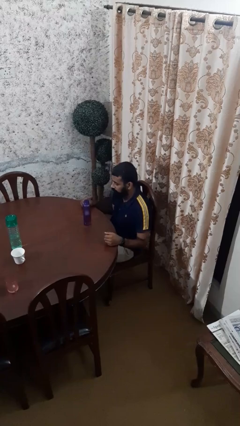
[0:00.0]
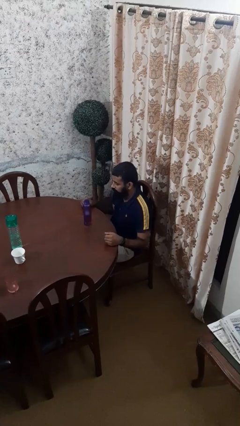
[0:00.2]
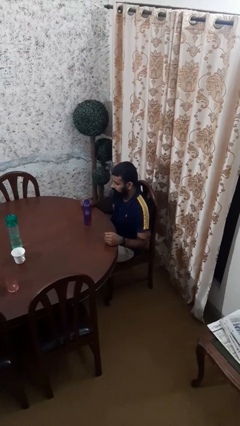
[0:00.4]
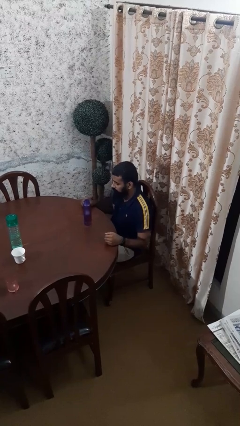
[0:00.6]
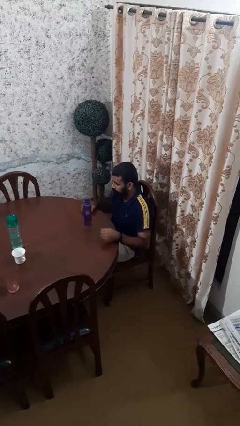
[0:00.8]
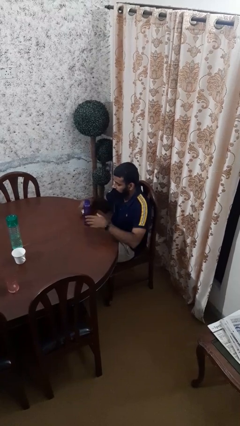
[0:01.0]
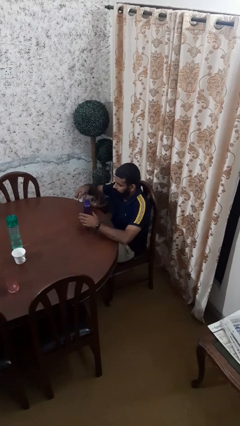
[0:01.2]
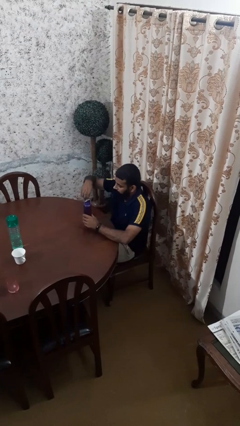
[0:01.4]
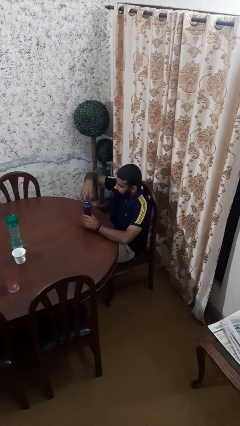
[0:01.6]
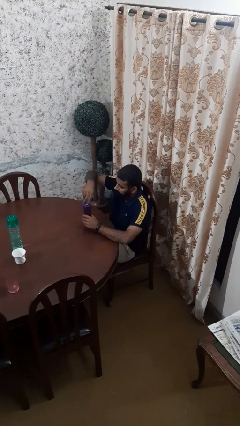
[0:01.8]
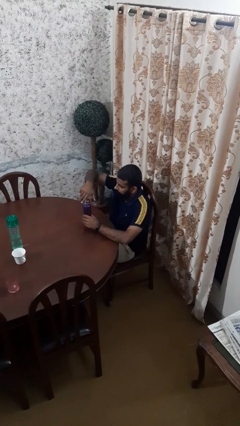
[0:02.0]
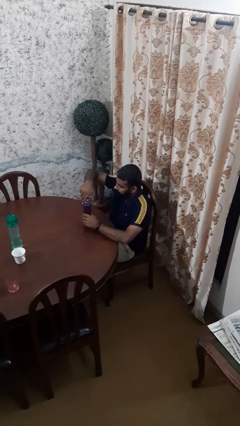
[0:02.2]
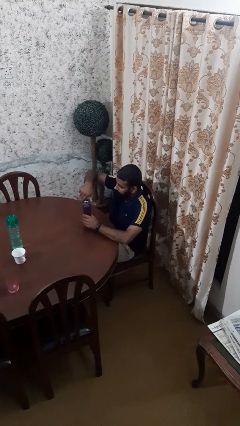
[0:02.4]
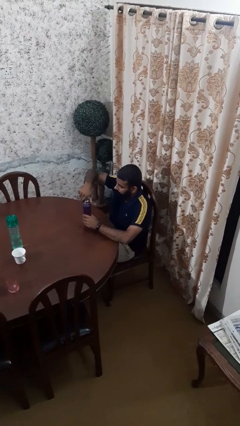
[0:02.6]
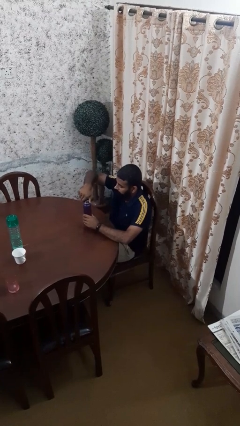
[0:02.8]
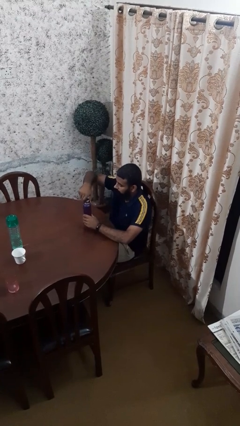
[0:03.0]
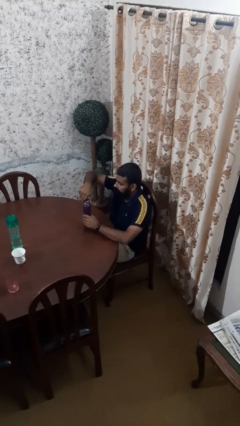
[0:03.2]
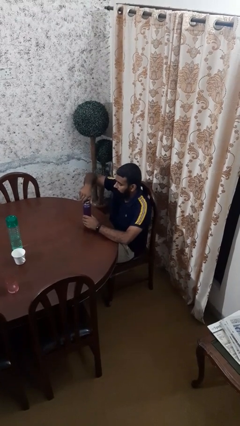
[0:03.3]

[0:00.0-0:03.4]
person screws lid to bottle

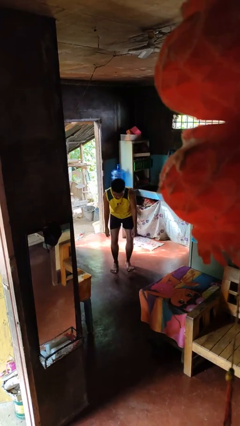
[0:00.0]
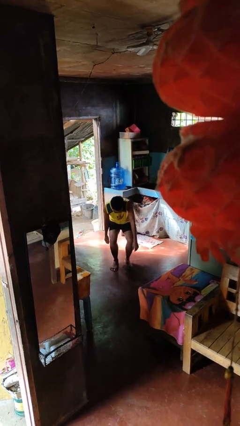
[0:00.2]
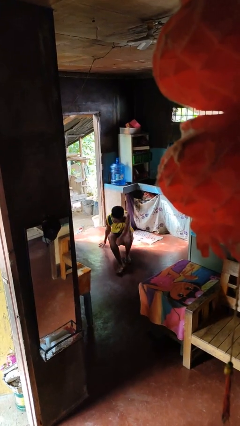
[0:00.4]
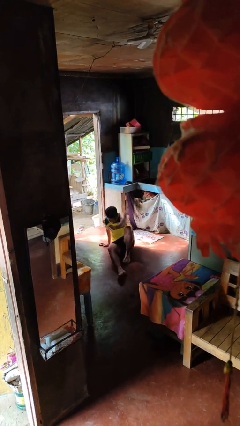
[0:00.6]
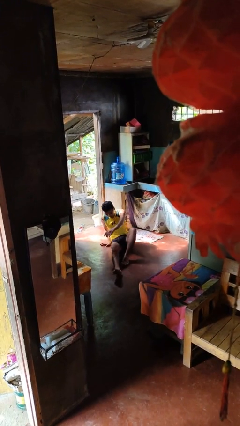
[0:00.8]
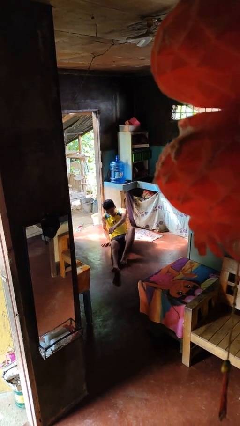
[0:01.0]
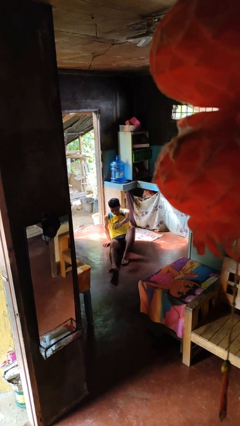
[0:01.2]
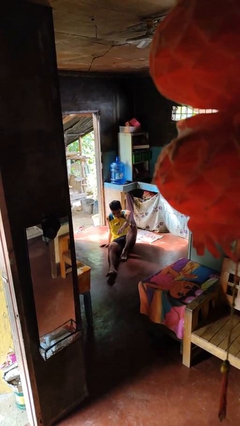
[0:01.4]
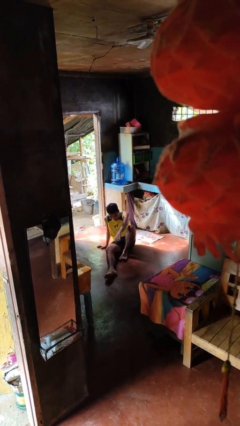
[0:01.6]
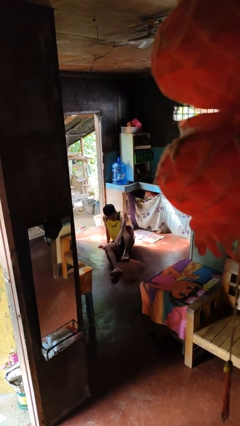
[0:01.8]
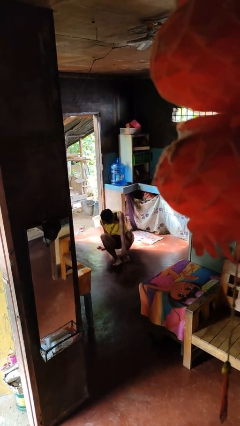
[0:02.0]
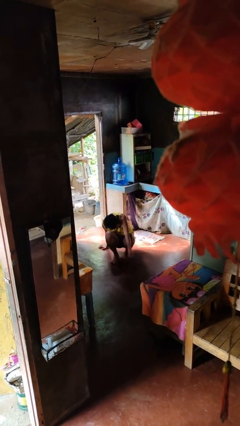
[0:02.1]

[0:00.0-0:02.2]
person falls while standing

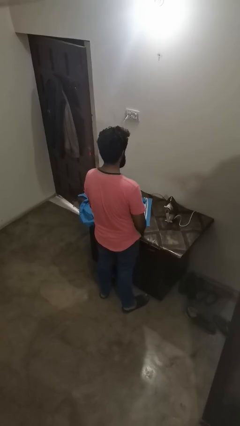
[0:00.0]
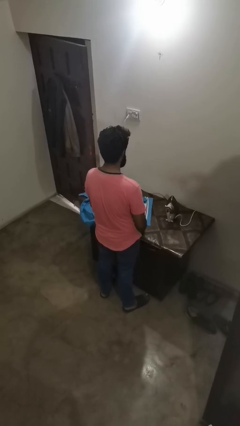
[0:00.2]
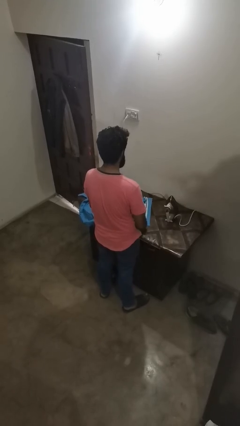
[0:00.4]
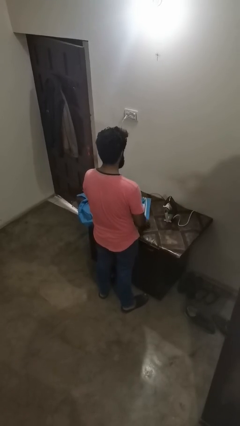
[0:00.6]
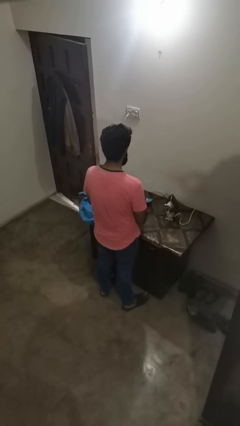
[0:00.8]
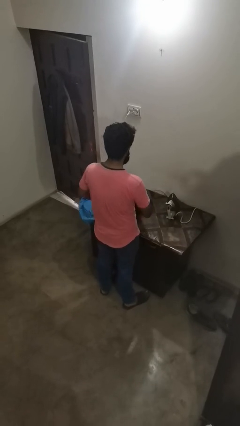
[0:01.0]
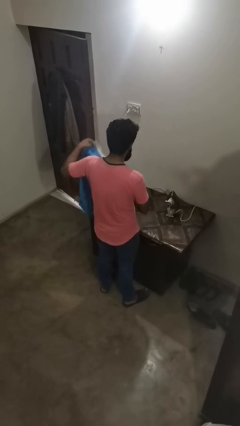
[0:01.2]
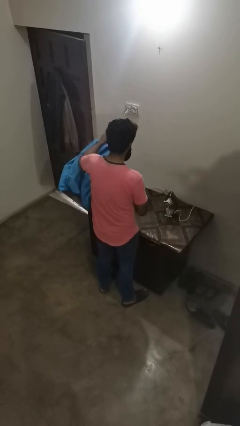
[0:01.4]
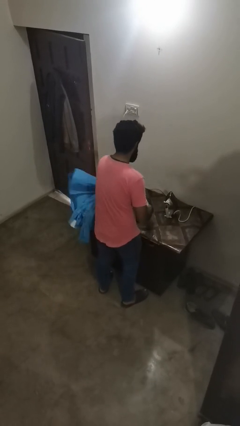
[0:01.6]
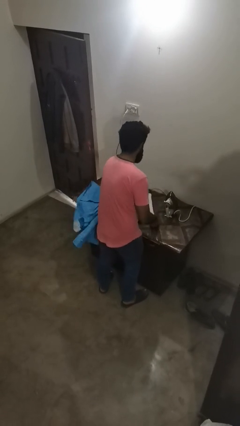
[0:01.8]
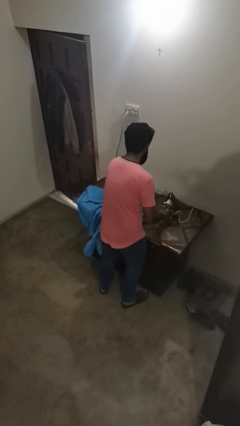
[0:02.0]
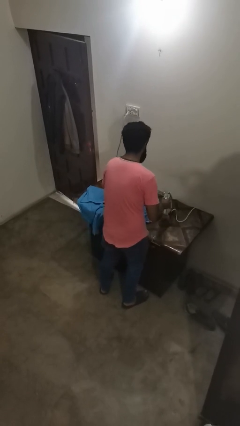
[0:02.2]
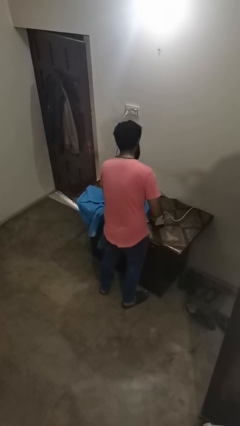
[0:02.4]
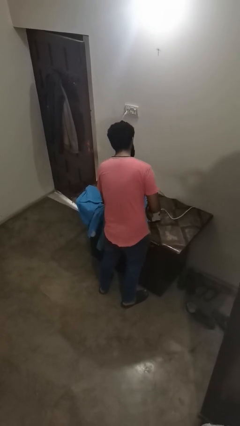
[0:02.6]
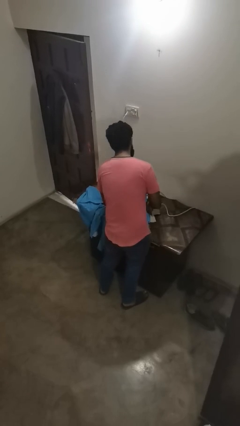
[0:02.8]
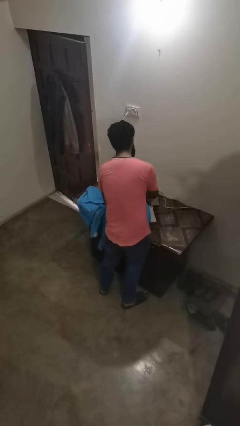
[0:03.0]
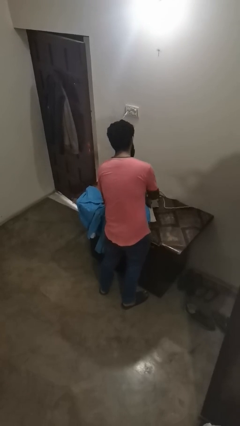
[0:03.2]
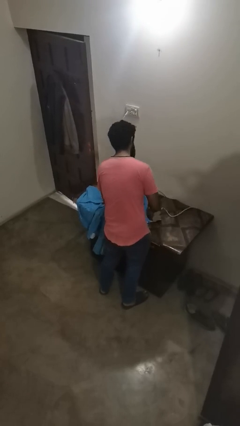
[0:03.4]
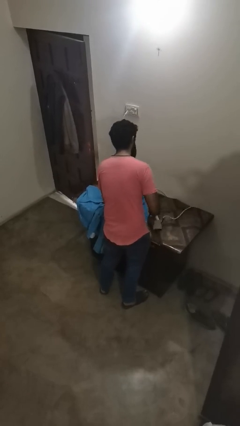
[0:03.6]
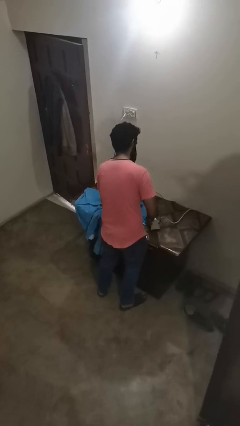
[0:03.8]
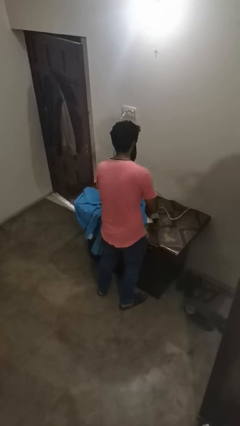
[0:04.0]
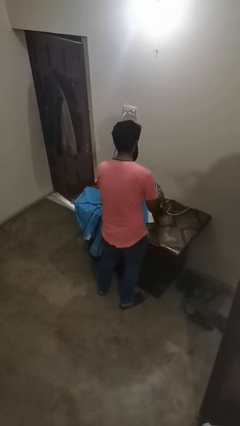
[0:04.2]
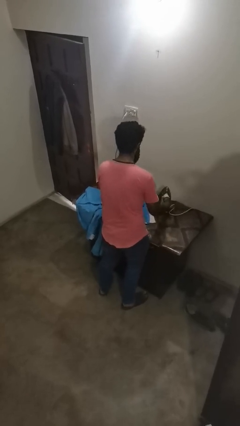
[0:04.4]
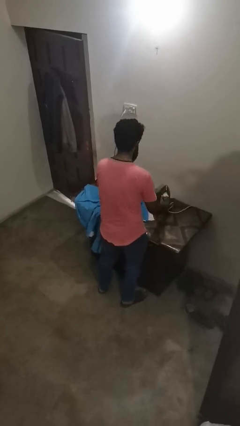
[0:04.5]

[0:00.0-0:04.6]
person irons clothes

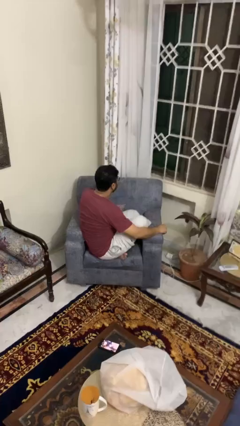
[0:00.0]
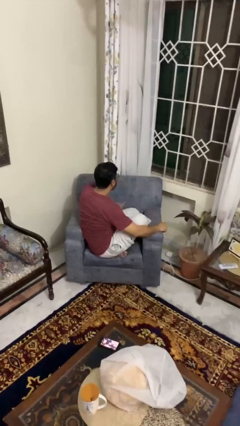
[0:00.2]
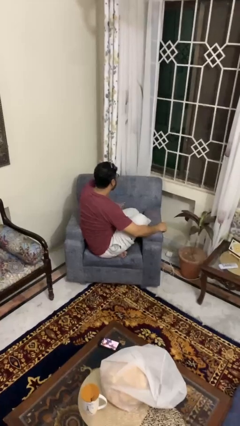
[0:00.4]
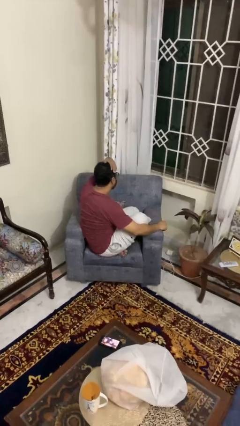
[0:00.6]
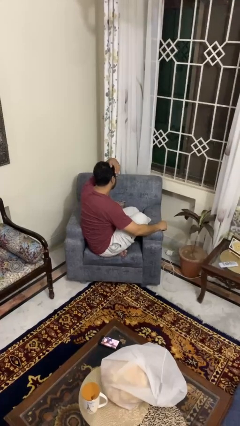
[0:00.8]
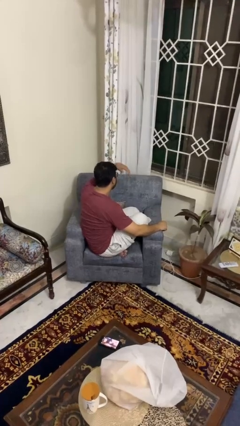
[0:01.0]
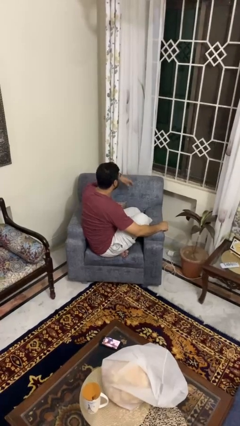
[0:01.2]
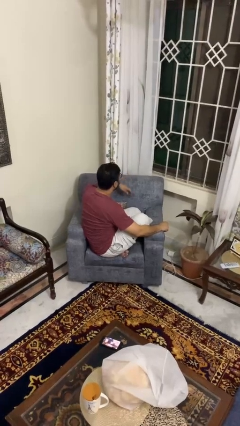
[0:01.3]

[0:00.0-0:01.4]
person strokes hair

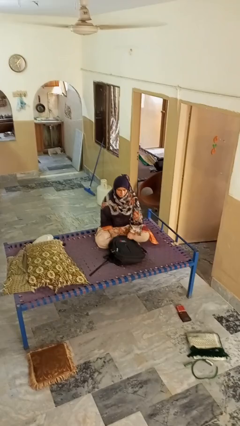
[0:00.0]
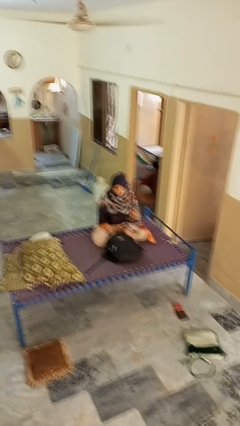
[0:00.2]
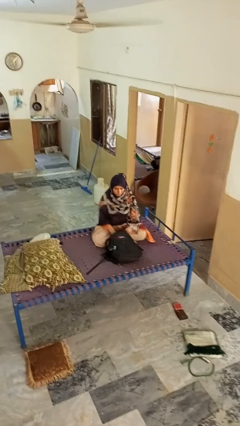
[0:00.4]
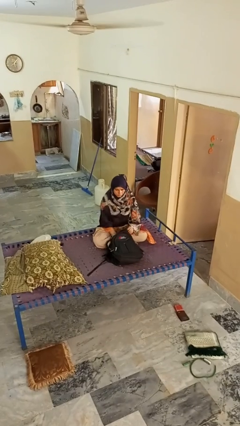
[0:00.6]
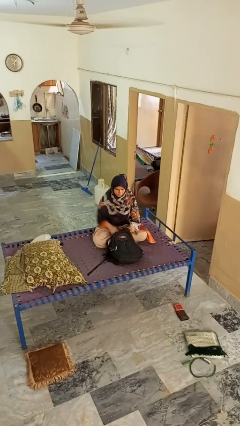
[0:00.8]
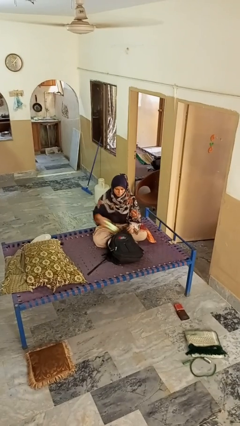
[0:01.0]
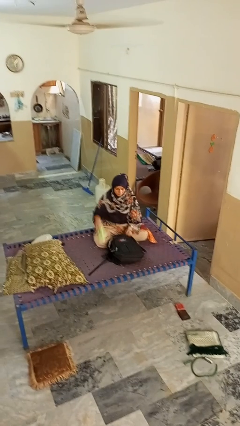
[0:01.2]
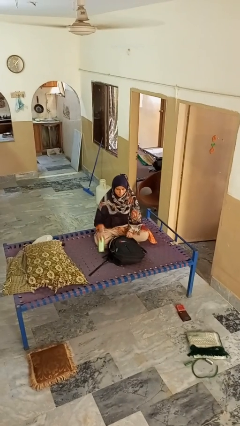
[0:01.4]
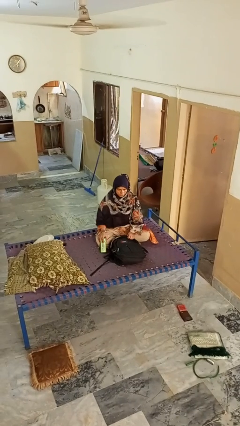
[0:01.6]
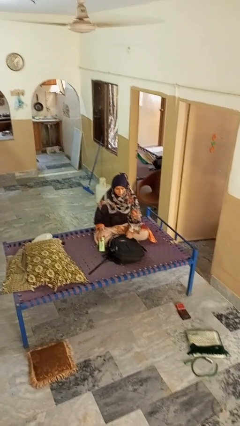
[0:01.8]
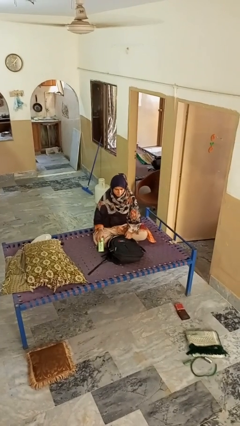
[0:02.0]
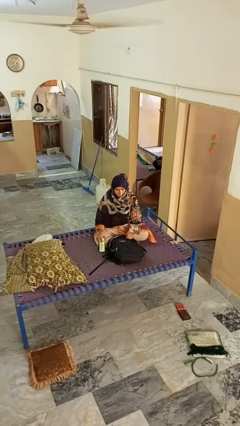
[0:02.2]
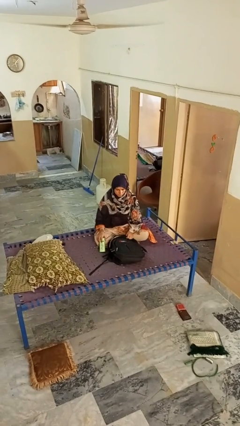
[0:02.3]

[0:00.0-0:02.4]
person takes object from bag

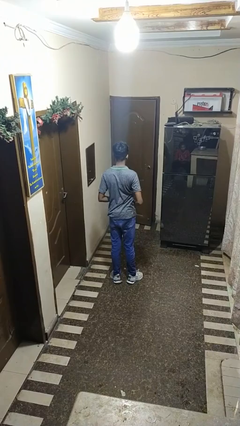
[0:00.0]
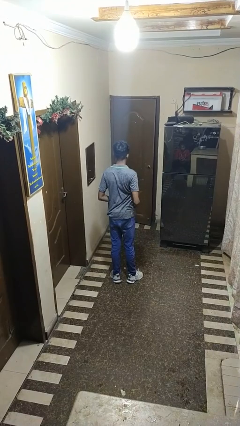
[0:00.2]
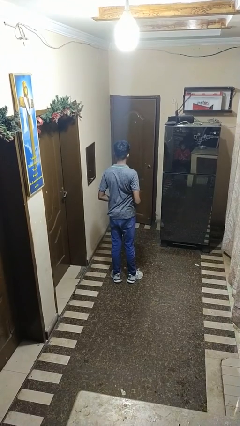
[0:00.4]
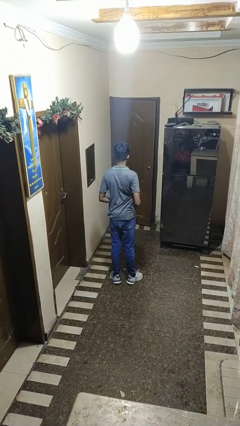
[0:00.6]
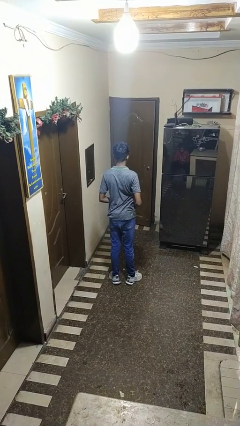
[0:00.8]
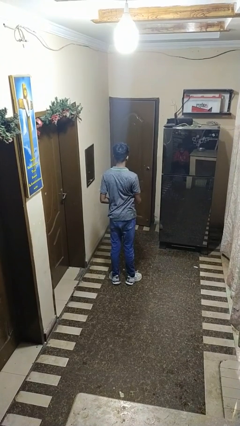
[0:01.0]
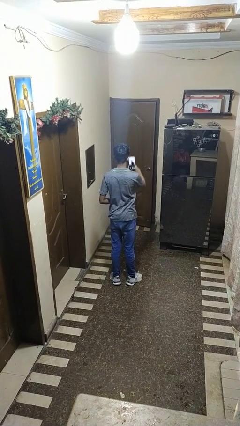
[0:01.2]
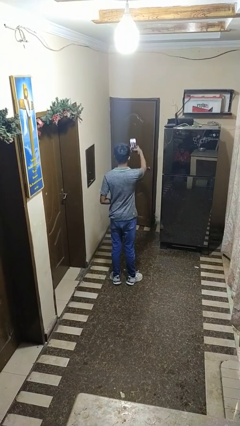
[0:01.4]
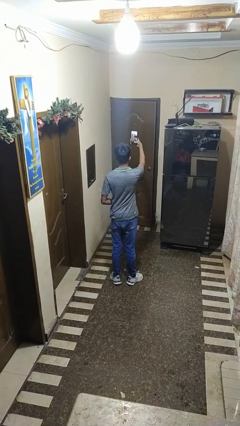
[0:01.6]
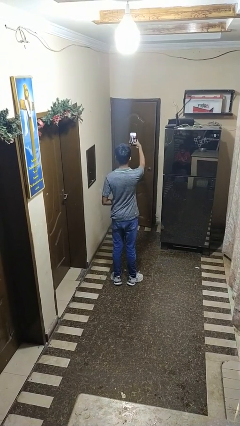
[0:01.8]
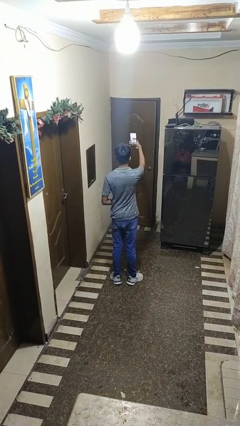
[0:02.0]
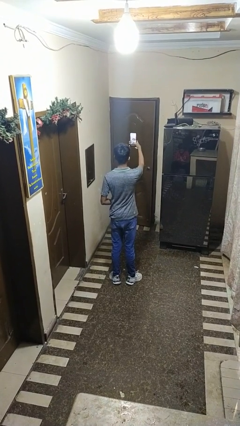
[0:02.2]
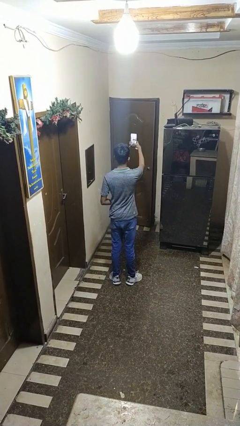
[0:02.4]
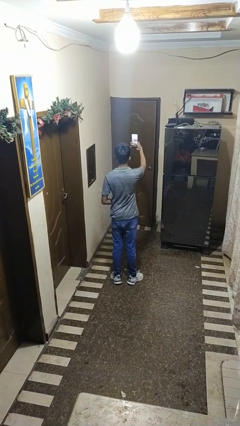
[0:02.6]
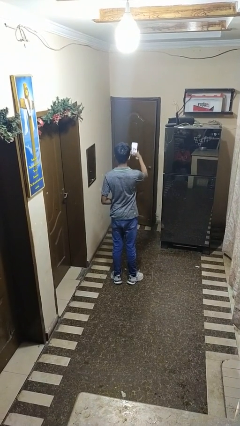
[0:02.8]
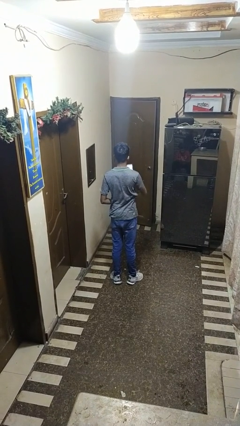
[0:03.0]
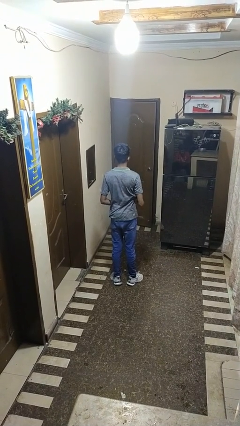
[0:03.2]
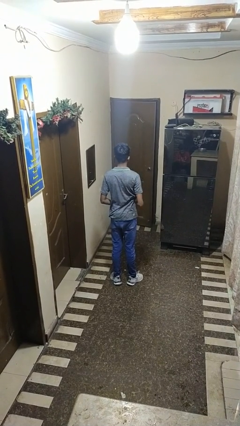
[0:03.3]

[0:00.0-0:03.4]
person takes selfie
